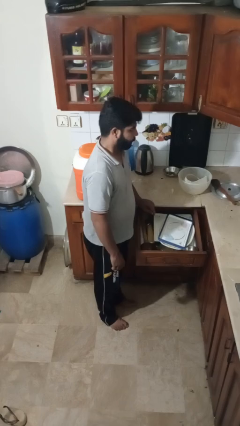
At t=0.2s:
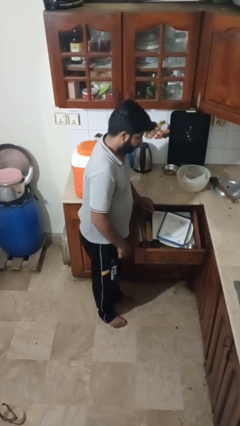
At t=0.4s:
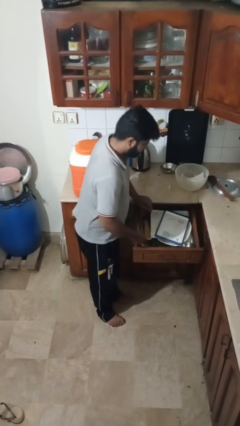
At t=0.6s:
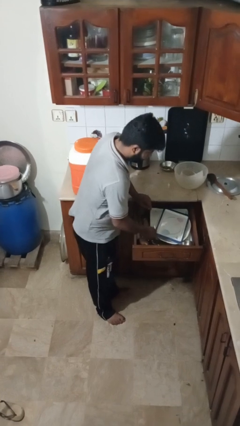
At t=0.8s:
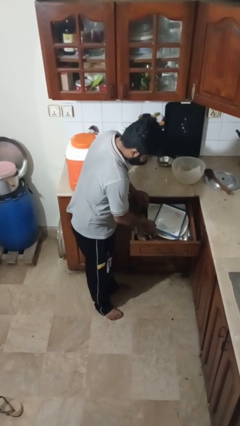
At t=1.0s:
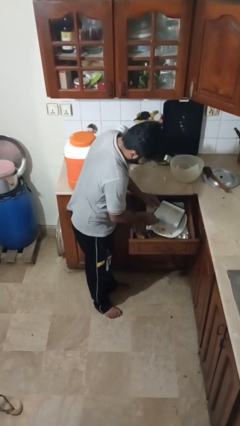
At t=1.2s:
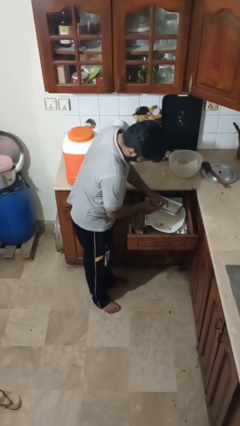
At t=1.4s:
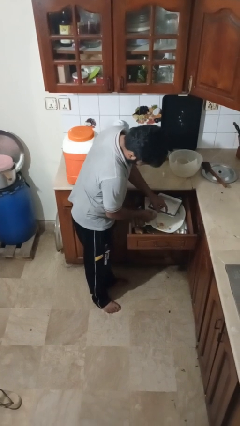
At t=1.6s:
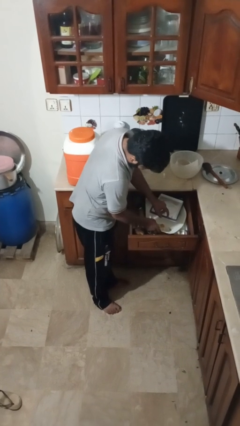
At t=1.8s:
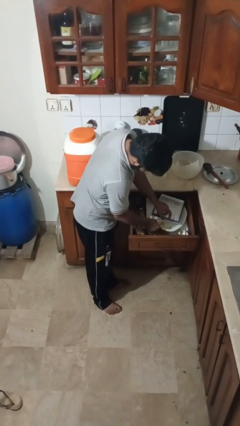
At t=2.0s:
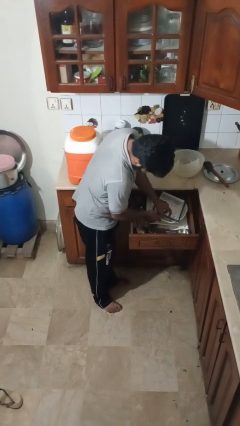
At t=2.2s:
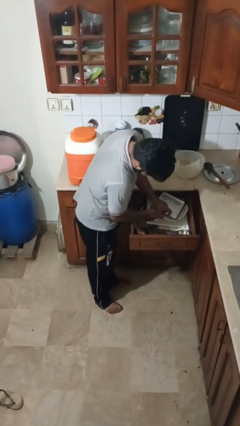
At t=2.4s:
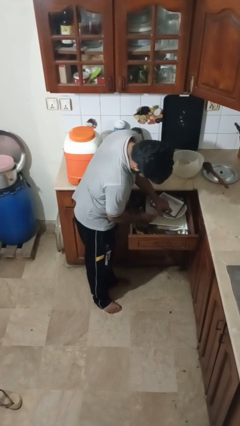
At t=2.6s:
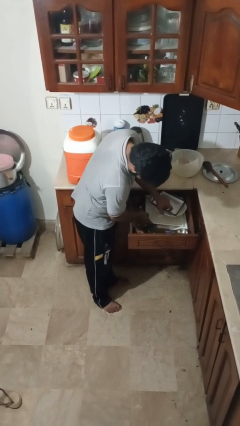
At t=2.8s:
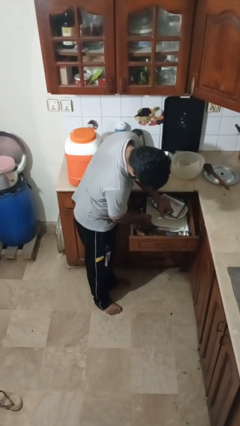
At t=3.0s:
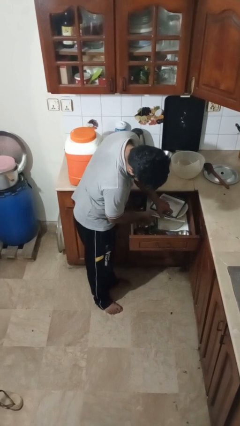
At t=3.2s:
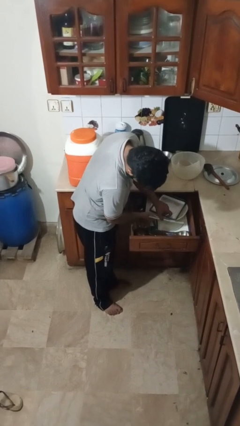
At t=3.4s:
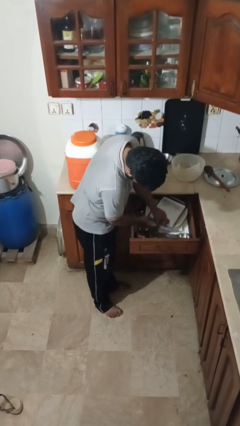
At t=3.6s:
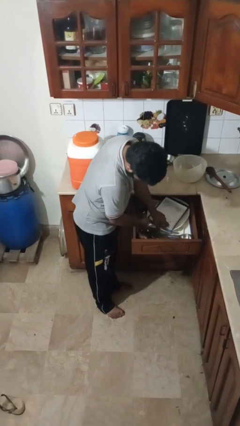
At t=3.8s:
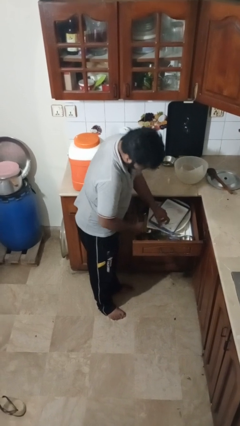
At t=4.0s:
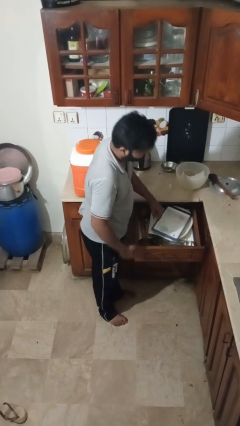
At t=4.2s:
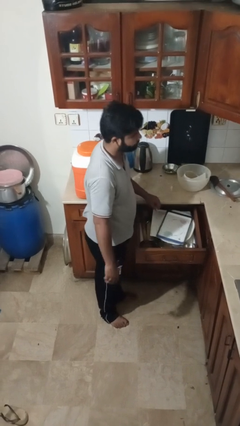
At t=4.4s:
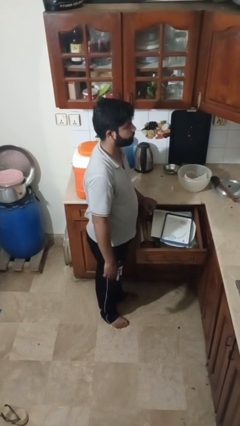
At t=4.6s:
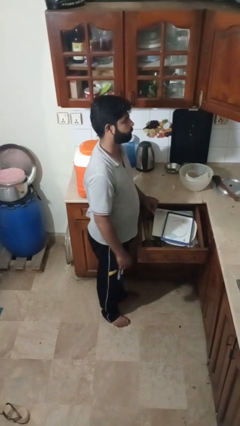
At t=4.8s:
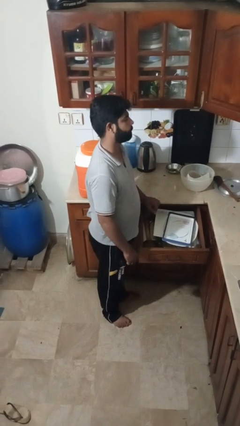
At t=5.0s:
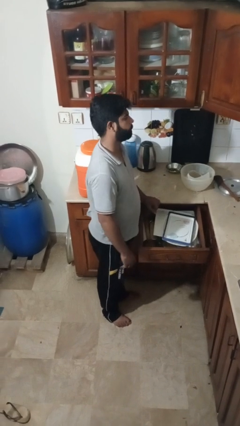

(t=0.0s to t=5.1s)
person searches in kitchen drawer

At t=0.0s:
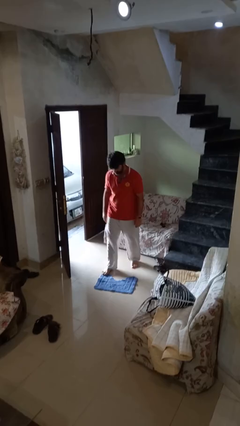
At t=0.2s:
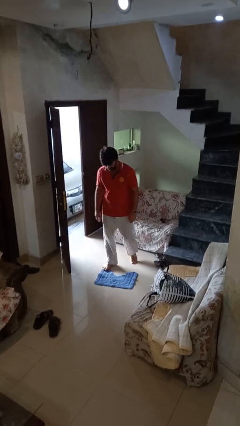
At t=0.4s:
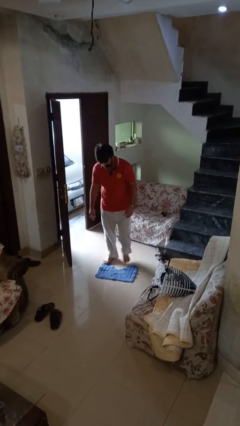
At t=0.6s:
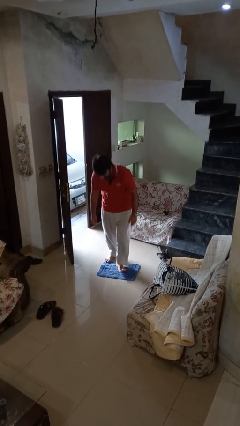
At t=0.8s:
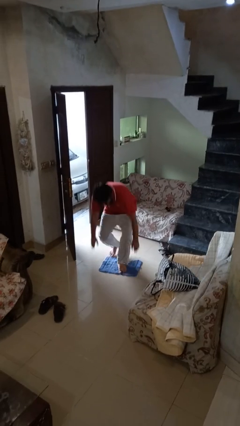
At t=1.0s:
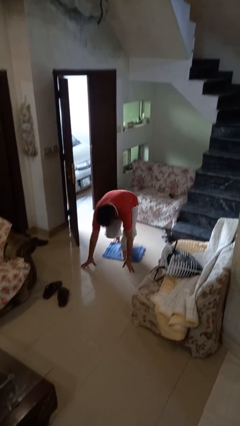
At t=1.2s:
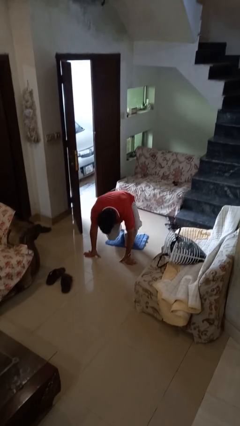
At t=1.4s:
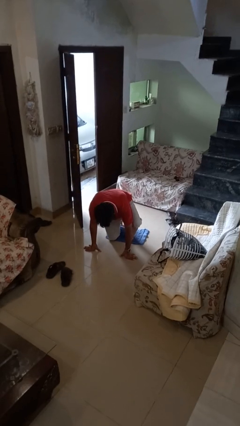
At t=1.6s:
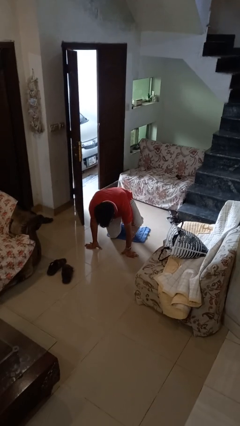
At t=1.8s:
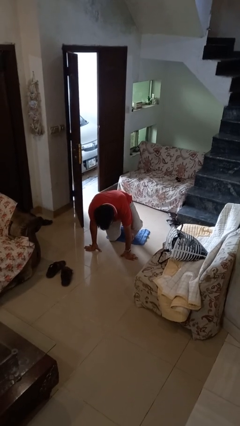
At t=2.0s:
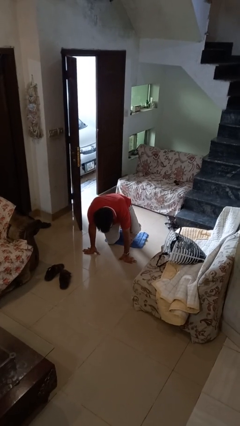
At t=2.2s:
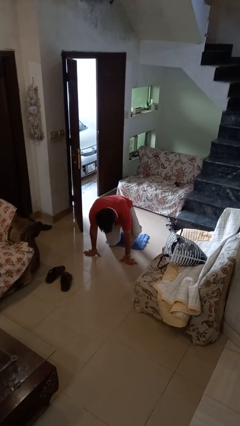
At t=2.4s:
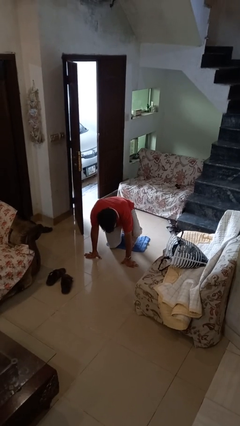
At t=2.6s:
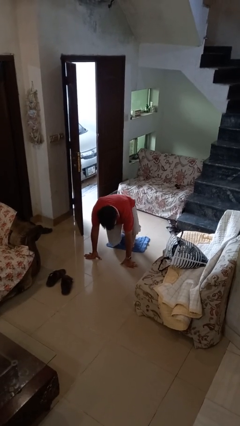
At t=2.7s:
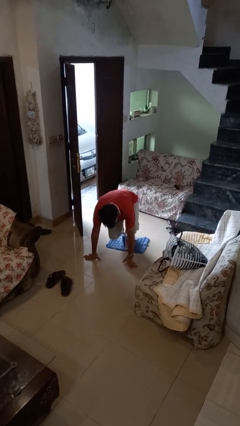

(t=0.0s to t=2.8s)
person trips on object on floor

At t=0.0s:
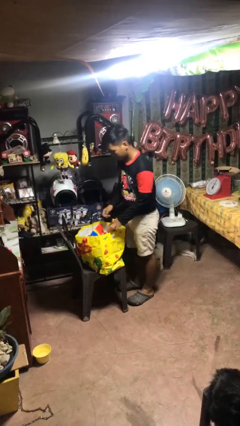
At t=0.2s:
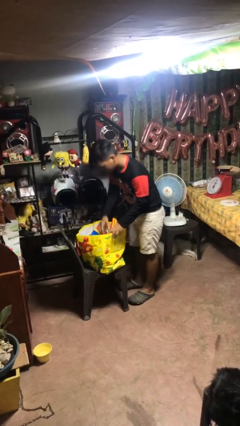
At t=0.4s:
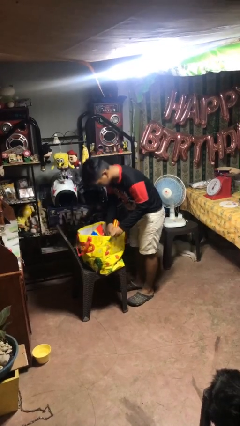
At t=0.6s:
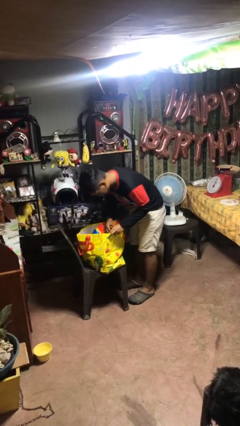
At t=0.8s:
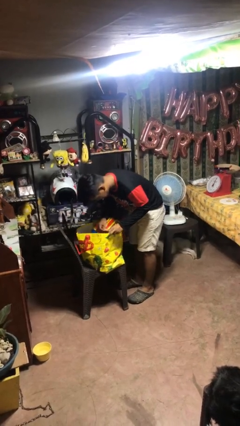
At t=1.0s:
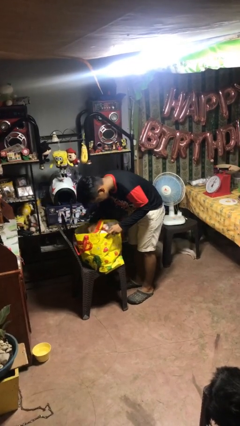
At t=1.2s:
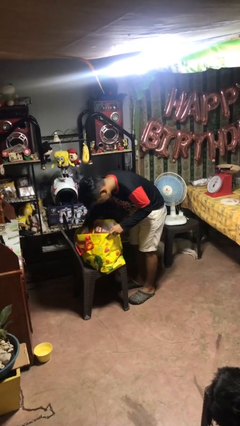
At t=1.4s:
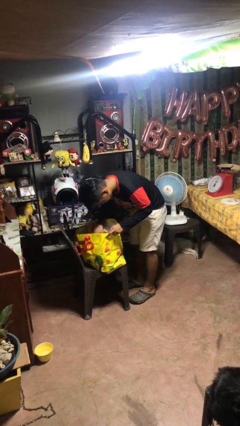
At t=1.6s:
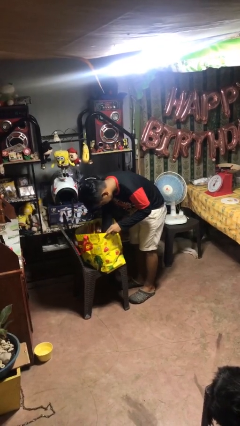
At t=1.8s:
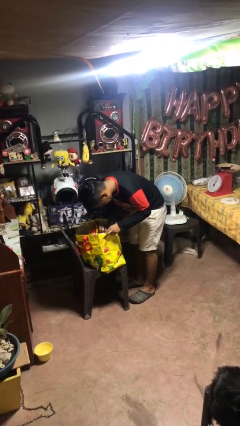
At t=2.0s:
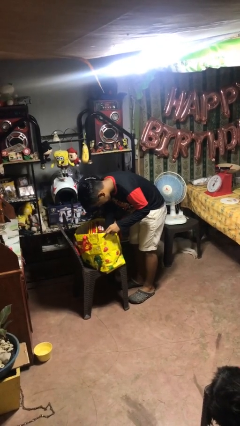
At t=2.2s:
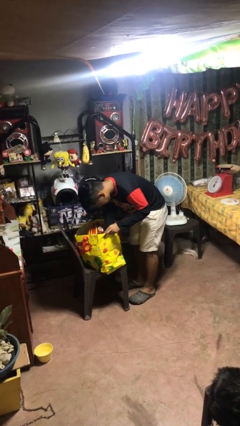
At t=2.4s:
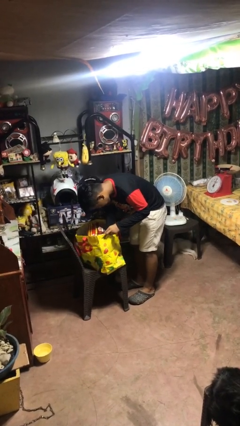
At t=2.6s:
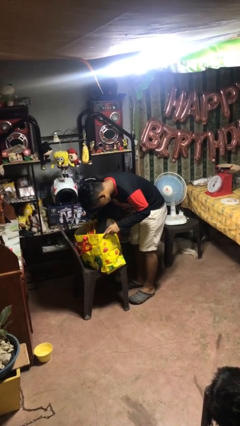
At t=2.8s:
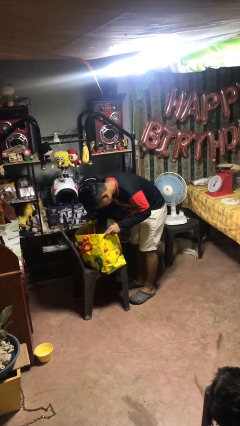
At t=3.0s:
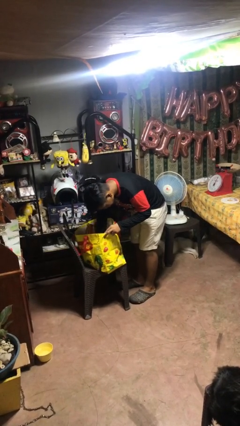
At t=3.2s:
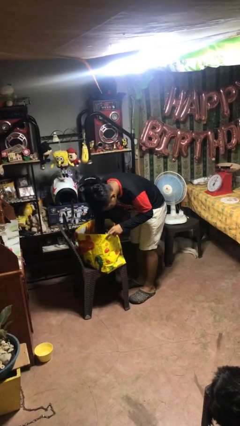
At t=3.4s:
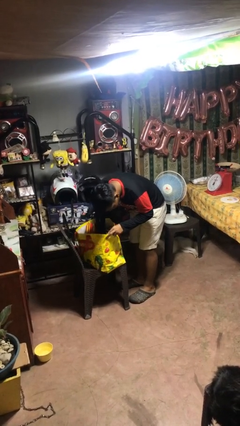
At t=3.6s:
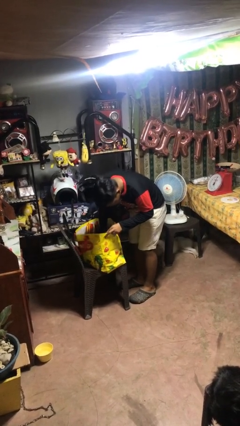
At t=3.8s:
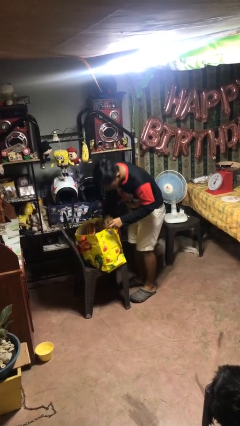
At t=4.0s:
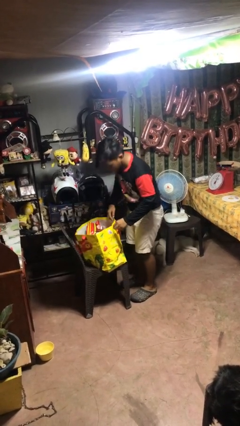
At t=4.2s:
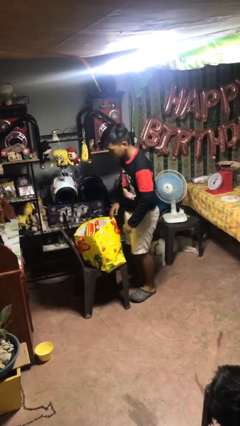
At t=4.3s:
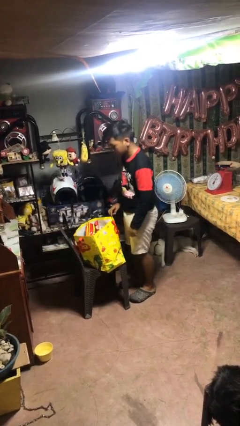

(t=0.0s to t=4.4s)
person searches in bag

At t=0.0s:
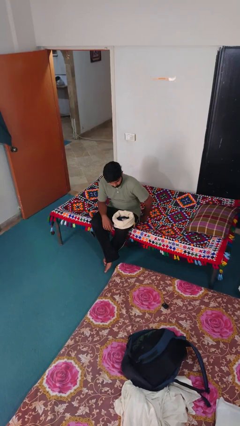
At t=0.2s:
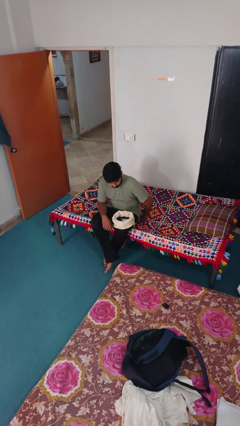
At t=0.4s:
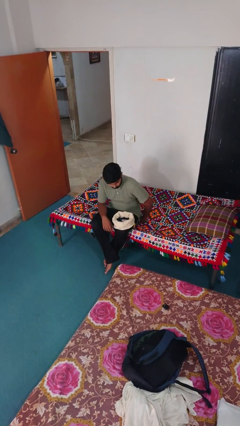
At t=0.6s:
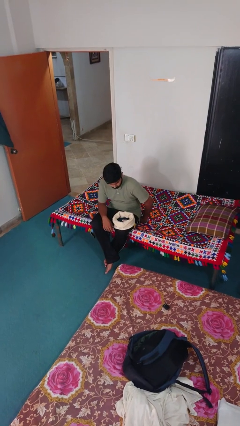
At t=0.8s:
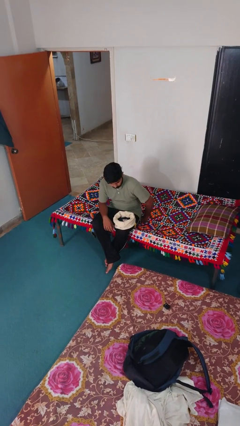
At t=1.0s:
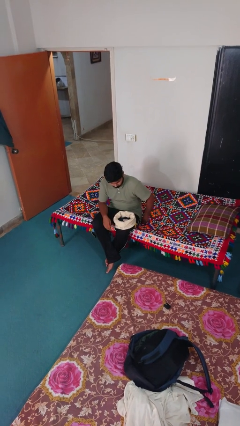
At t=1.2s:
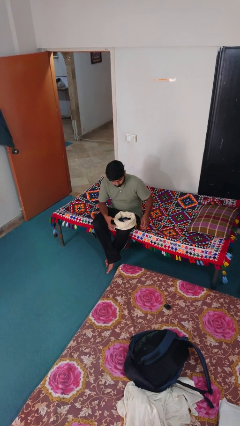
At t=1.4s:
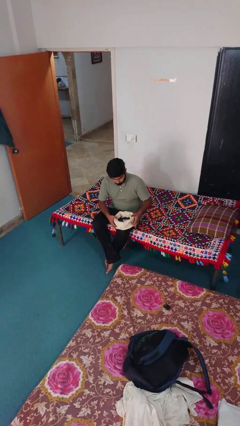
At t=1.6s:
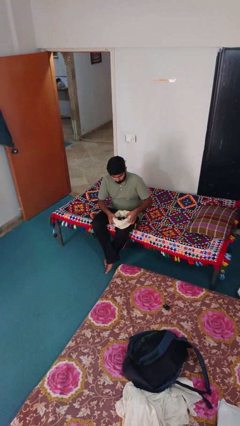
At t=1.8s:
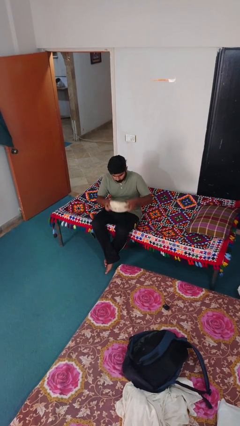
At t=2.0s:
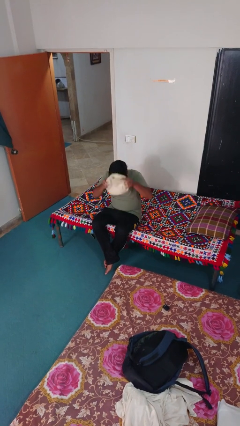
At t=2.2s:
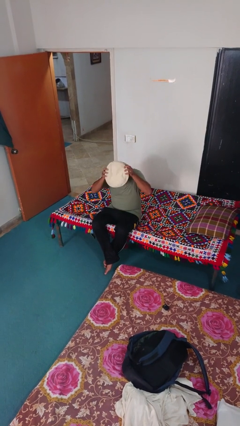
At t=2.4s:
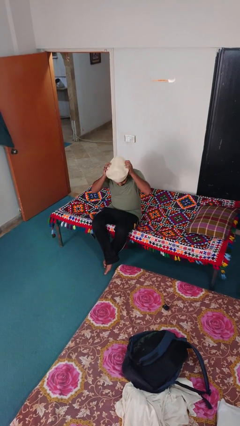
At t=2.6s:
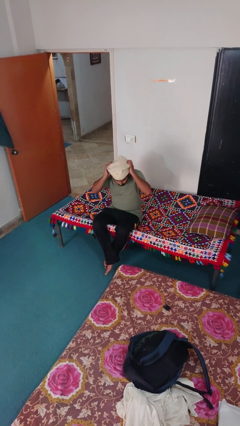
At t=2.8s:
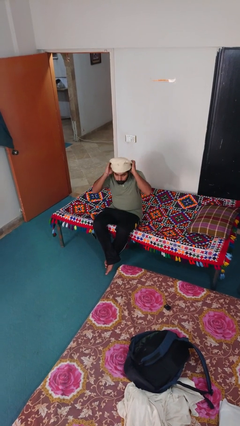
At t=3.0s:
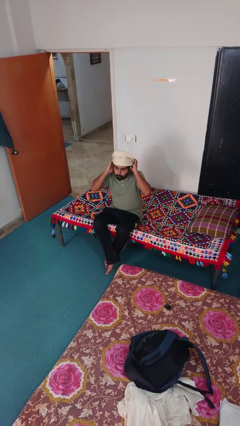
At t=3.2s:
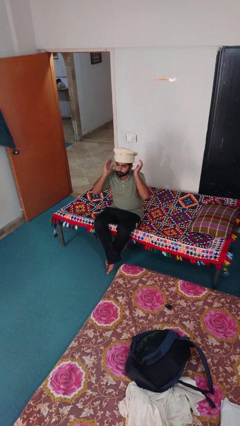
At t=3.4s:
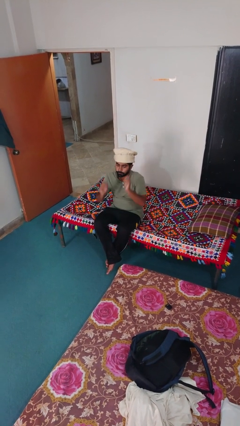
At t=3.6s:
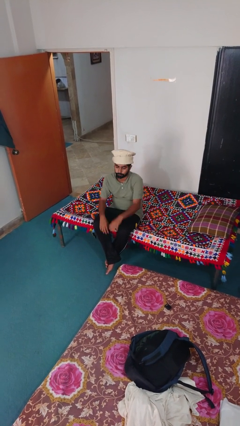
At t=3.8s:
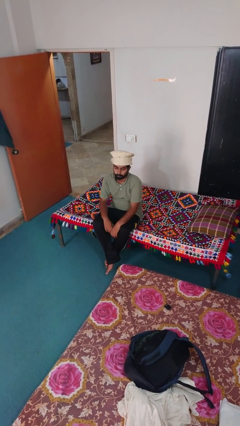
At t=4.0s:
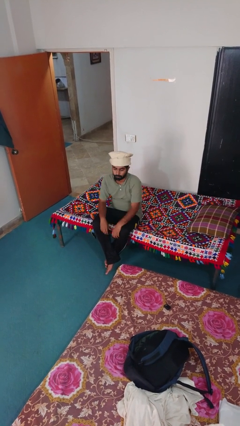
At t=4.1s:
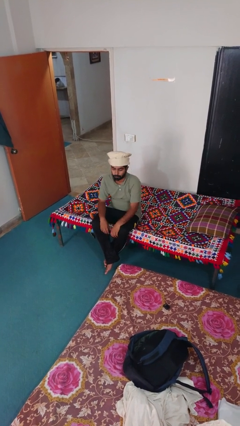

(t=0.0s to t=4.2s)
person puts on hat

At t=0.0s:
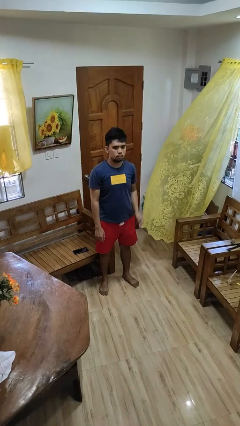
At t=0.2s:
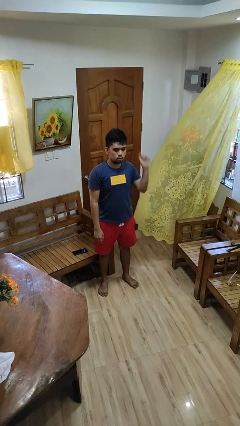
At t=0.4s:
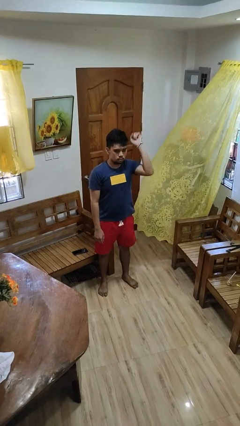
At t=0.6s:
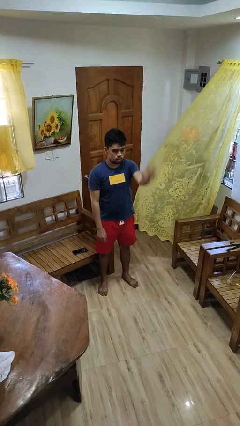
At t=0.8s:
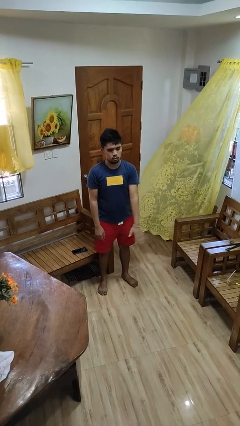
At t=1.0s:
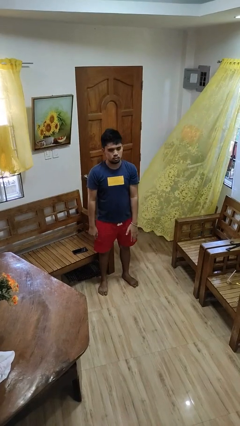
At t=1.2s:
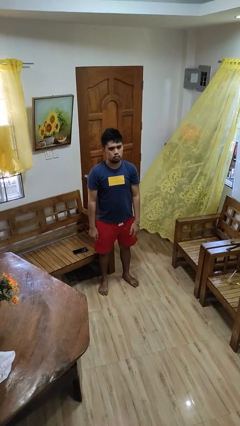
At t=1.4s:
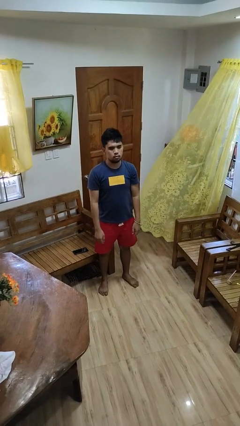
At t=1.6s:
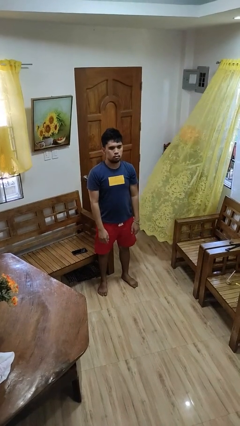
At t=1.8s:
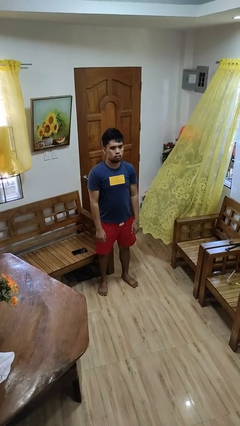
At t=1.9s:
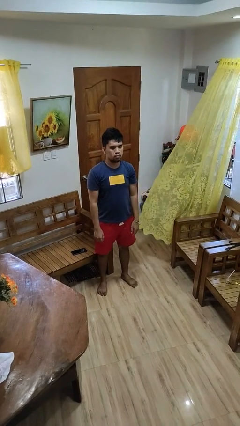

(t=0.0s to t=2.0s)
person gestures swipe down
